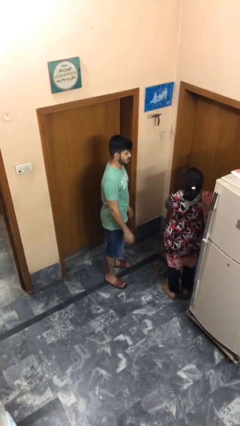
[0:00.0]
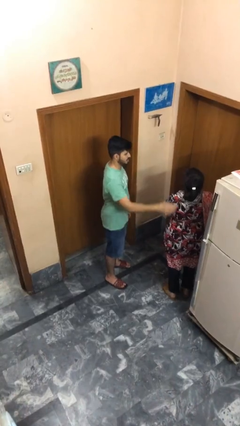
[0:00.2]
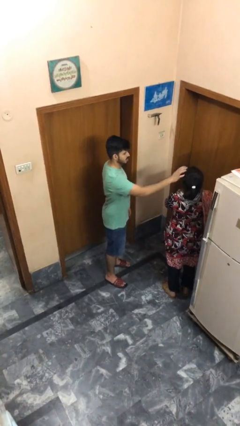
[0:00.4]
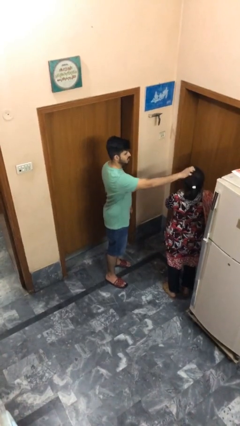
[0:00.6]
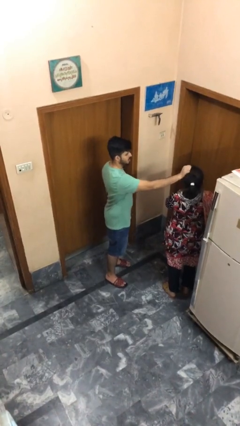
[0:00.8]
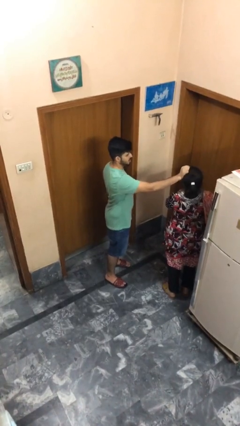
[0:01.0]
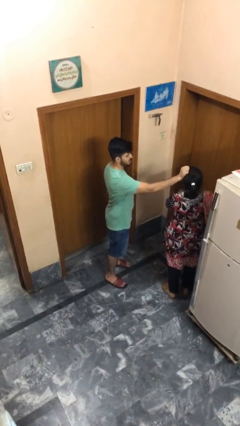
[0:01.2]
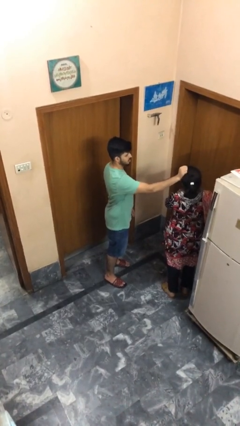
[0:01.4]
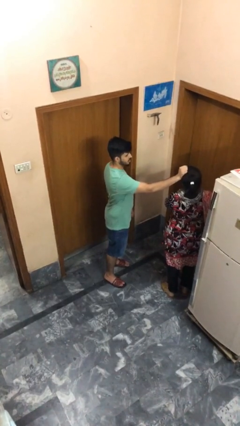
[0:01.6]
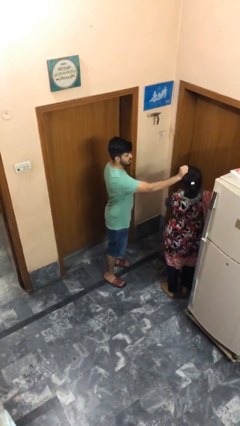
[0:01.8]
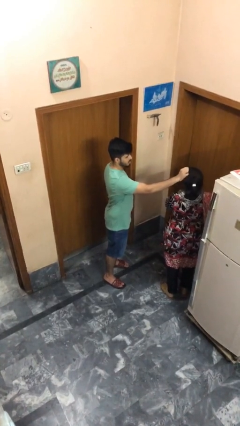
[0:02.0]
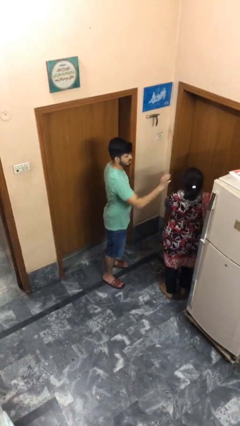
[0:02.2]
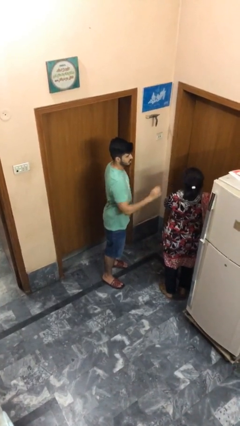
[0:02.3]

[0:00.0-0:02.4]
person grabs person by hair

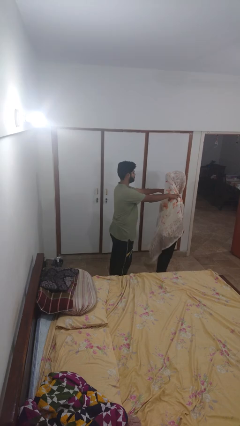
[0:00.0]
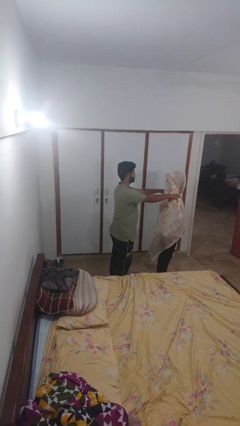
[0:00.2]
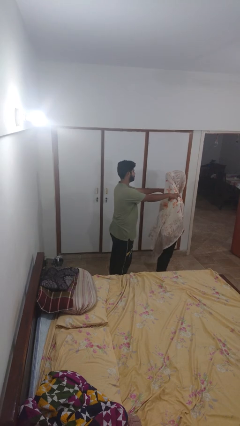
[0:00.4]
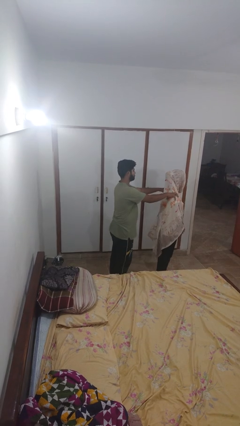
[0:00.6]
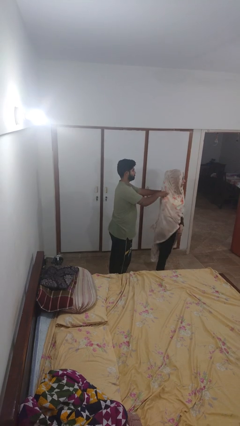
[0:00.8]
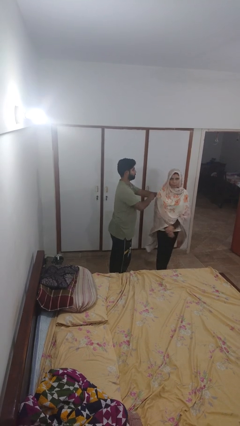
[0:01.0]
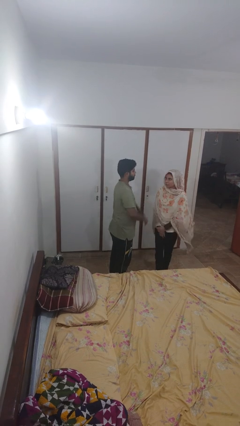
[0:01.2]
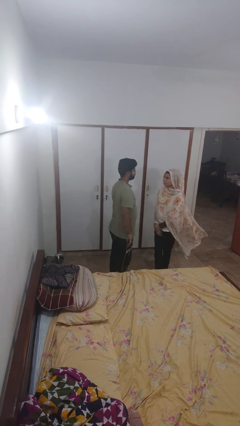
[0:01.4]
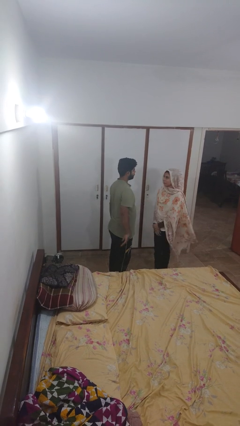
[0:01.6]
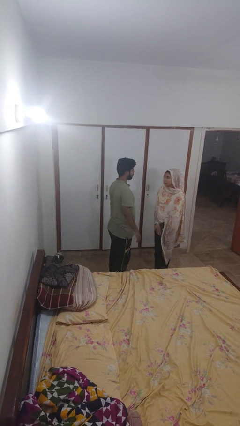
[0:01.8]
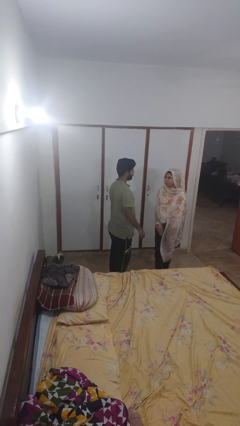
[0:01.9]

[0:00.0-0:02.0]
person spins person around

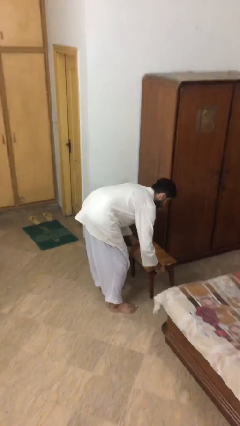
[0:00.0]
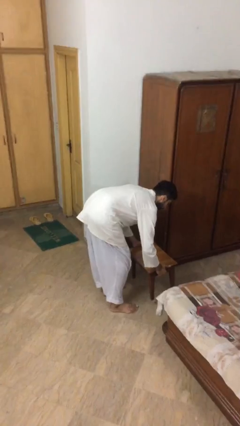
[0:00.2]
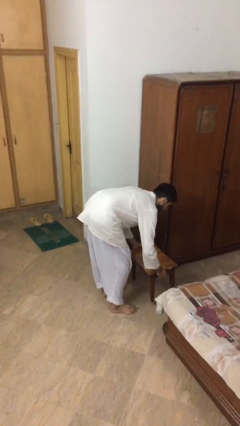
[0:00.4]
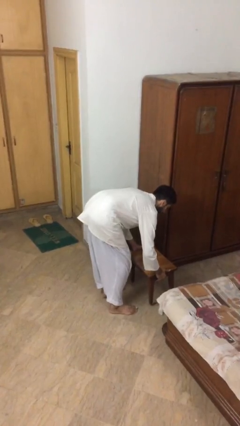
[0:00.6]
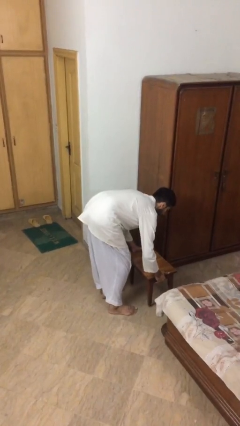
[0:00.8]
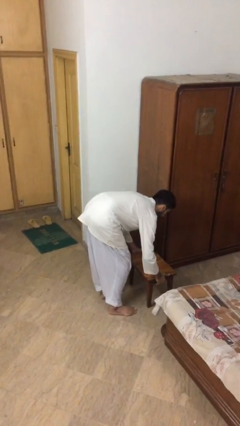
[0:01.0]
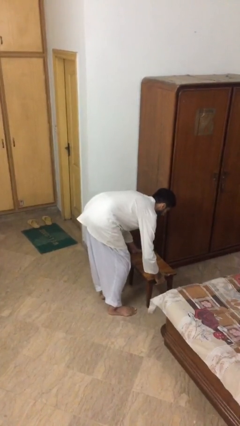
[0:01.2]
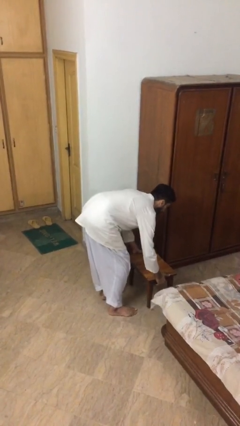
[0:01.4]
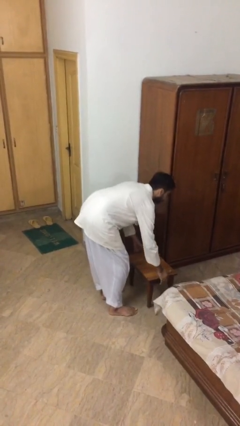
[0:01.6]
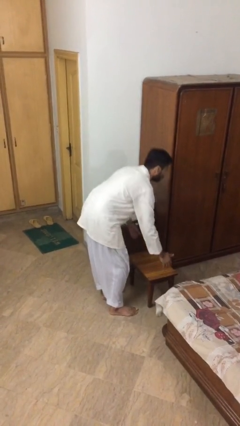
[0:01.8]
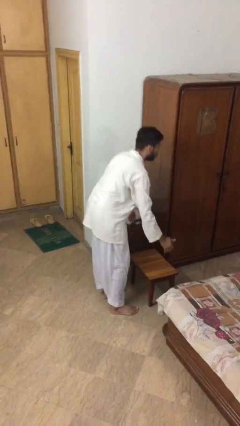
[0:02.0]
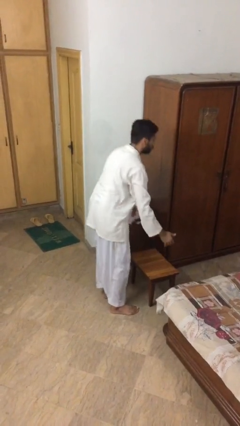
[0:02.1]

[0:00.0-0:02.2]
person puts down object on floor

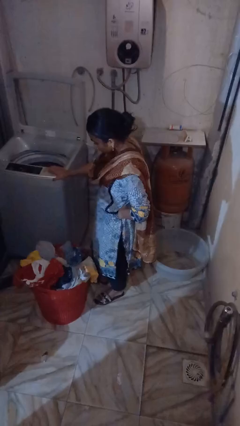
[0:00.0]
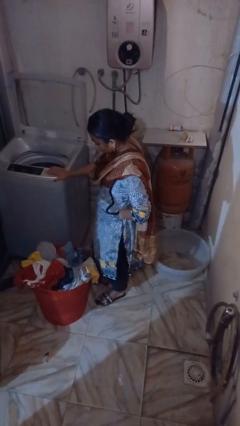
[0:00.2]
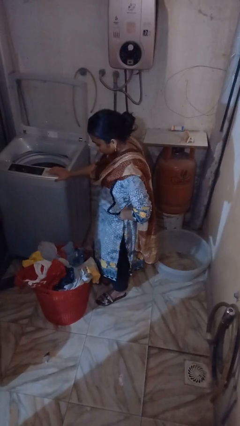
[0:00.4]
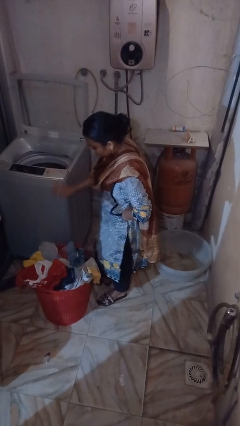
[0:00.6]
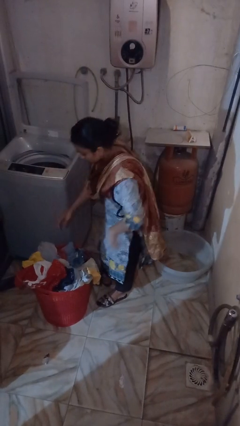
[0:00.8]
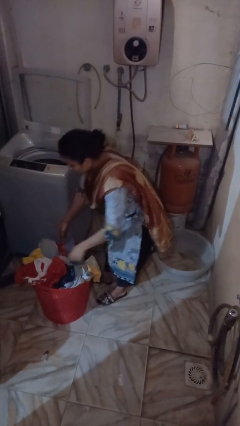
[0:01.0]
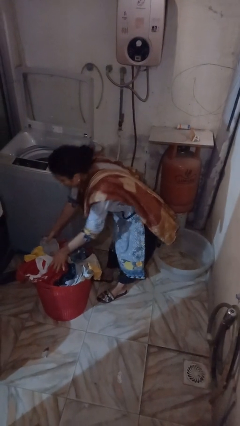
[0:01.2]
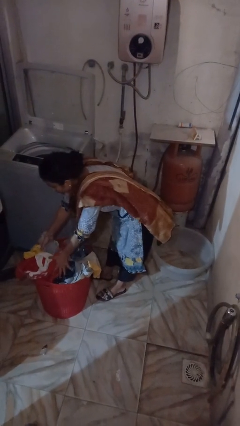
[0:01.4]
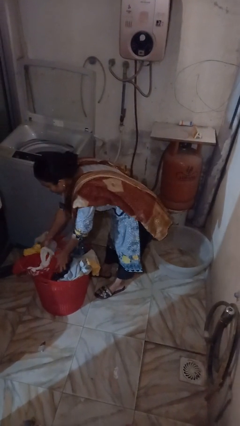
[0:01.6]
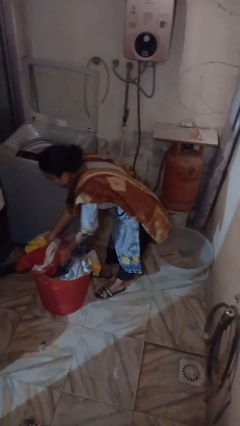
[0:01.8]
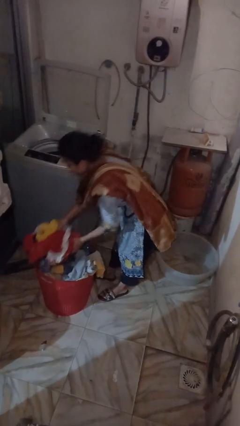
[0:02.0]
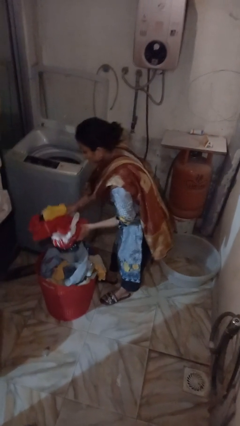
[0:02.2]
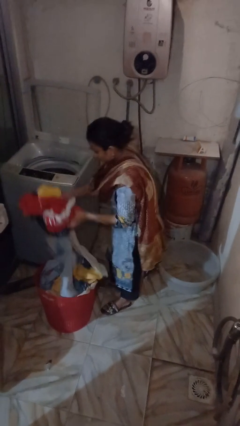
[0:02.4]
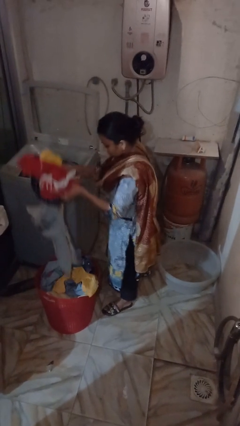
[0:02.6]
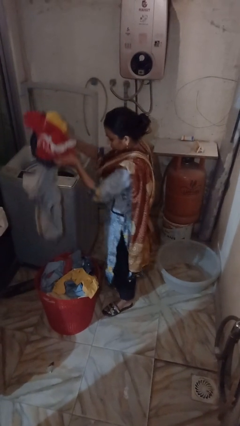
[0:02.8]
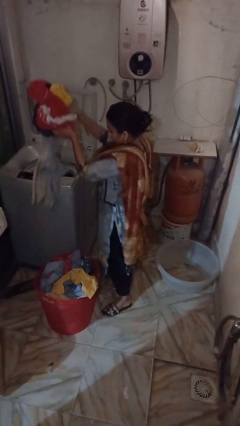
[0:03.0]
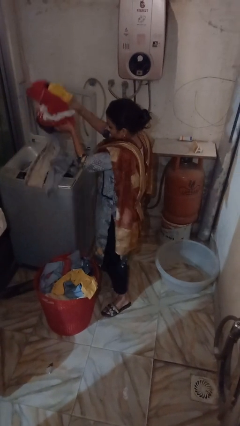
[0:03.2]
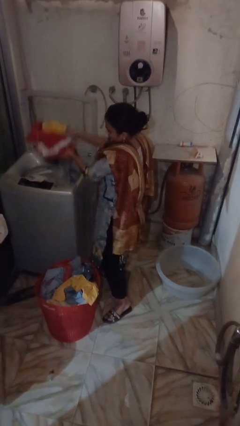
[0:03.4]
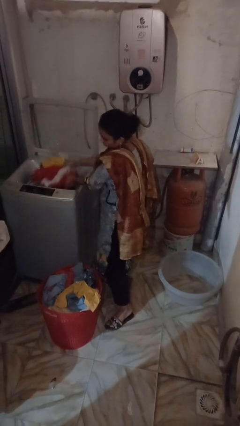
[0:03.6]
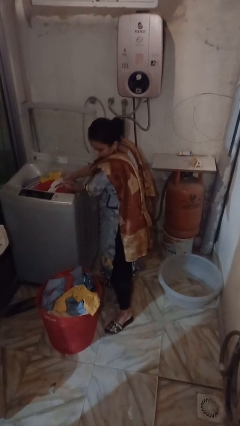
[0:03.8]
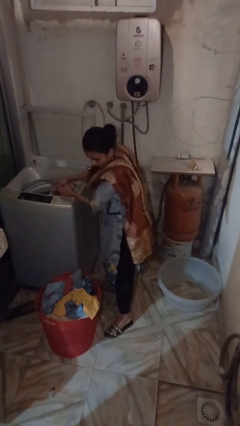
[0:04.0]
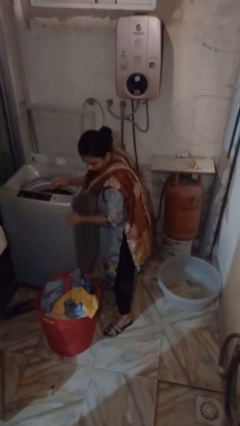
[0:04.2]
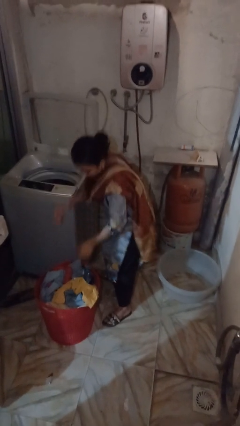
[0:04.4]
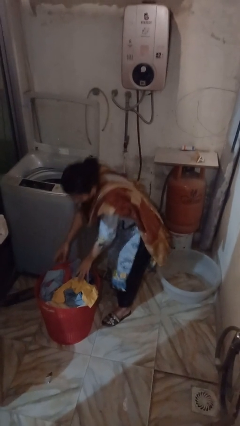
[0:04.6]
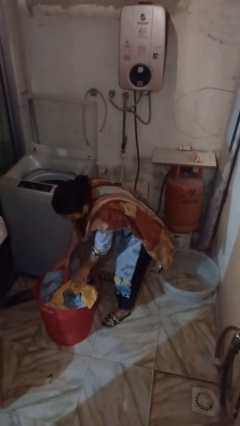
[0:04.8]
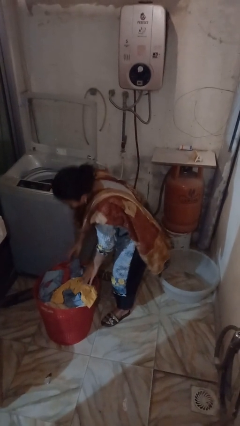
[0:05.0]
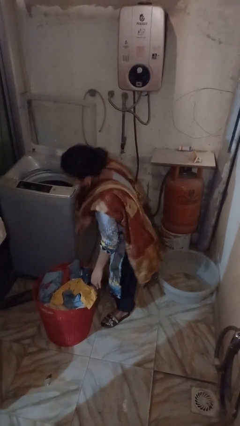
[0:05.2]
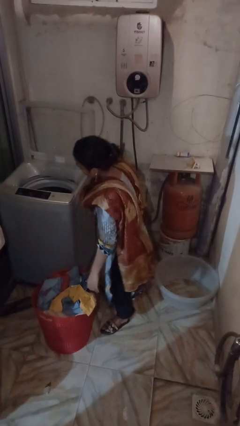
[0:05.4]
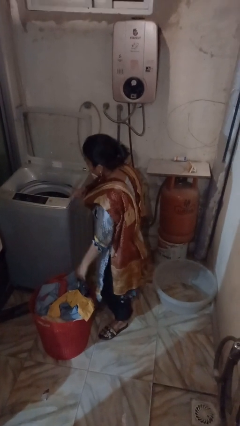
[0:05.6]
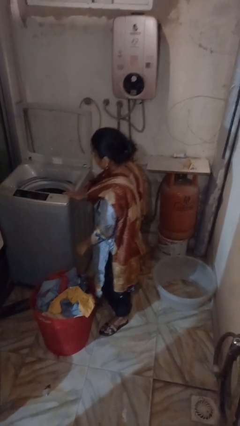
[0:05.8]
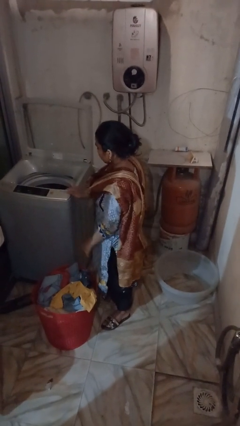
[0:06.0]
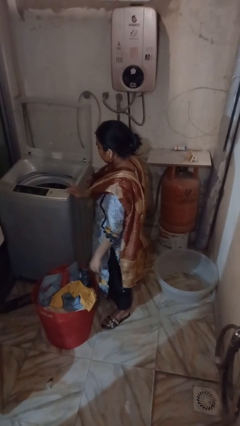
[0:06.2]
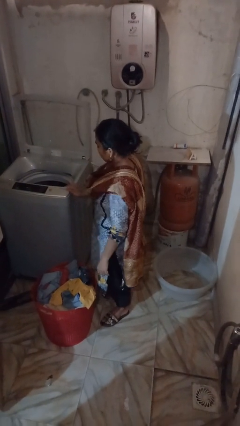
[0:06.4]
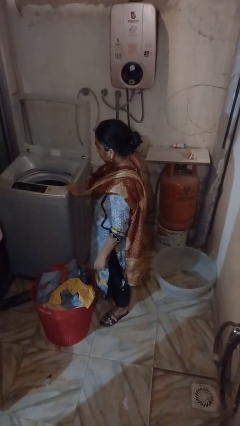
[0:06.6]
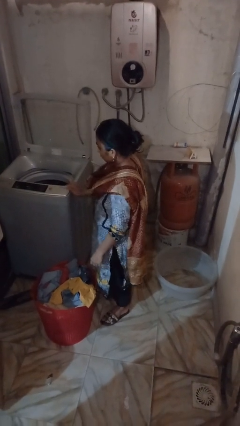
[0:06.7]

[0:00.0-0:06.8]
person loads dryer

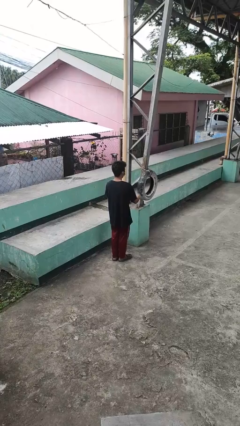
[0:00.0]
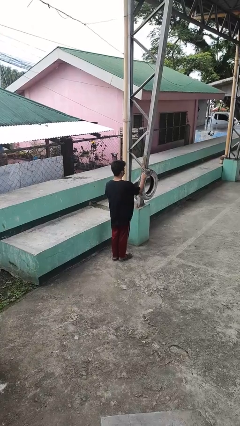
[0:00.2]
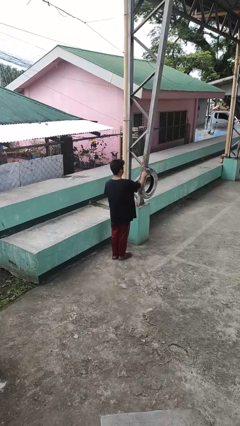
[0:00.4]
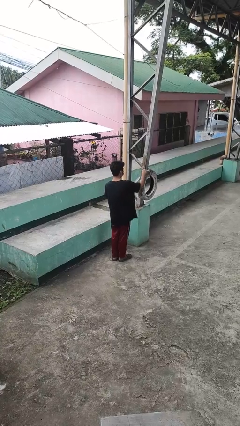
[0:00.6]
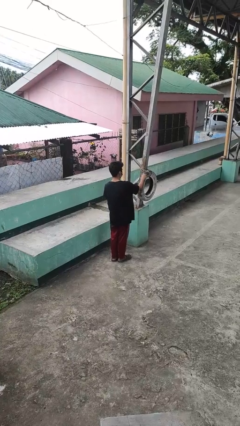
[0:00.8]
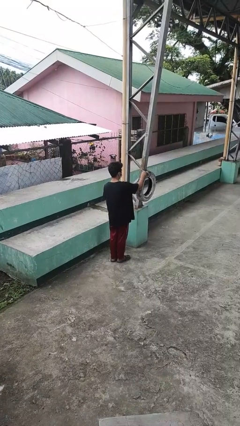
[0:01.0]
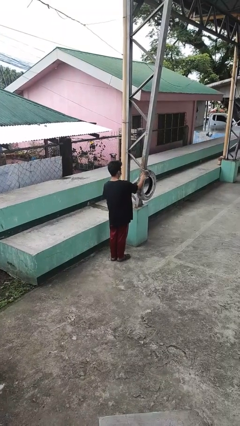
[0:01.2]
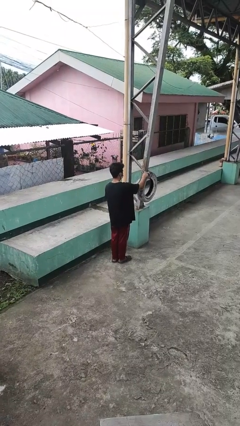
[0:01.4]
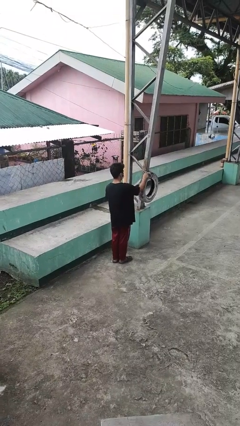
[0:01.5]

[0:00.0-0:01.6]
person taps object with finger

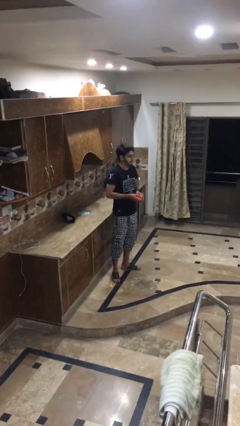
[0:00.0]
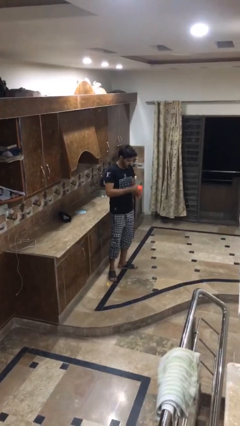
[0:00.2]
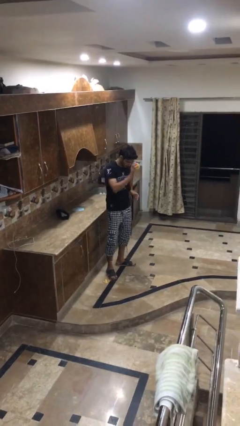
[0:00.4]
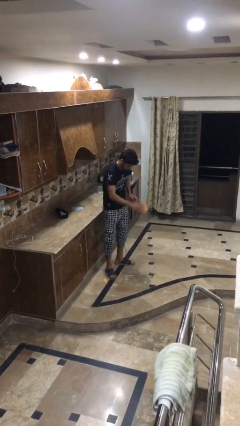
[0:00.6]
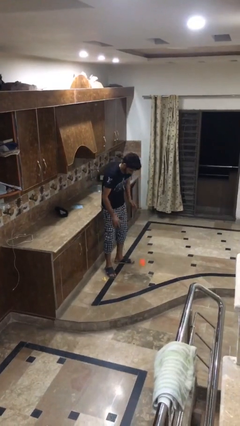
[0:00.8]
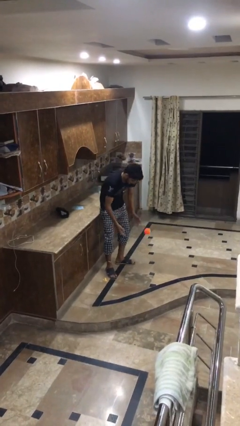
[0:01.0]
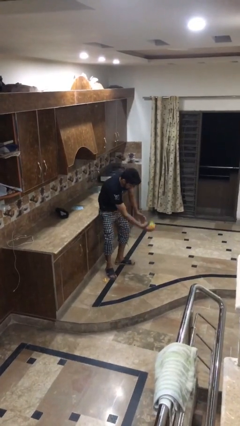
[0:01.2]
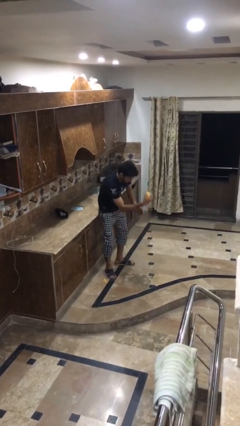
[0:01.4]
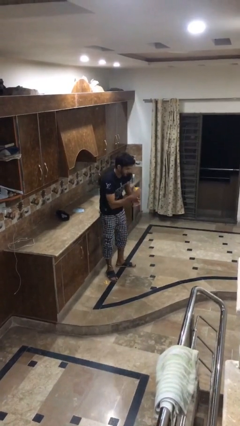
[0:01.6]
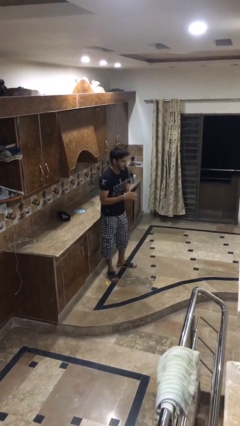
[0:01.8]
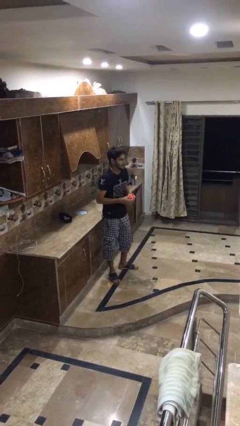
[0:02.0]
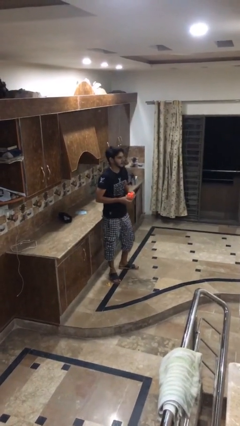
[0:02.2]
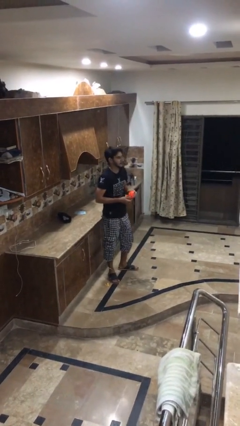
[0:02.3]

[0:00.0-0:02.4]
person bounces ball on floor
